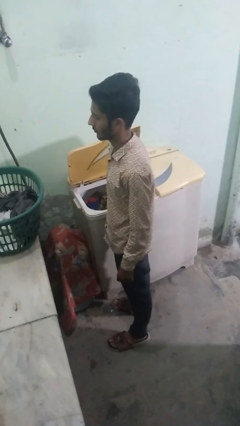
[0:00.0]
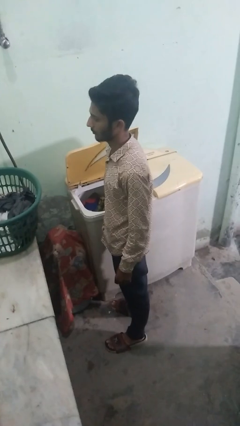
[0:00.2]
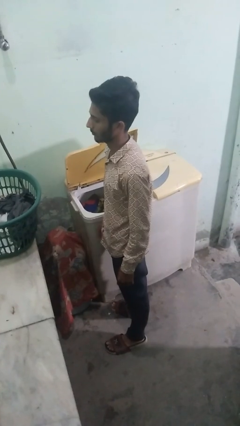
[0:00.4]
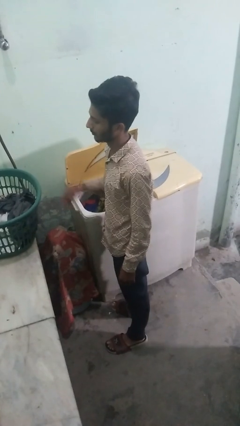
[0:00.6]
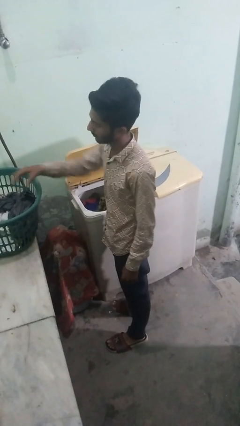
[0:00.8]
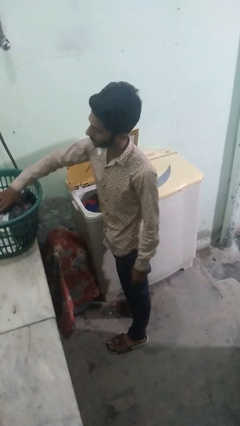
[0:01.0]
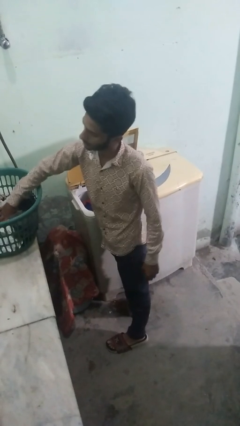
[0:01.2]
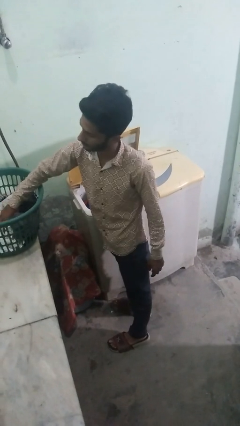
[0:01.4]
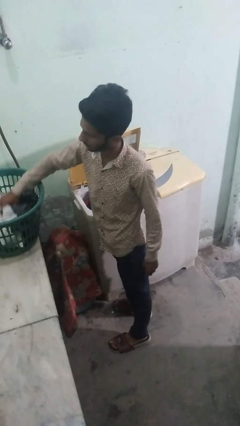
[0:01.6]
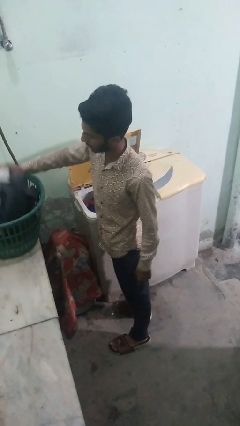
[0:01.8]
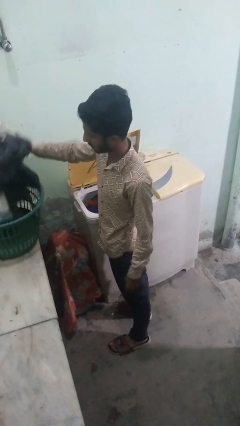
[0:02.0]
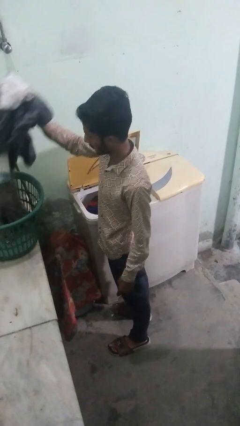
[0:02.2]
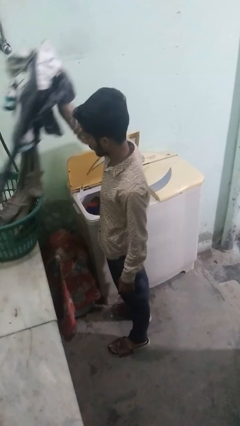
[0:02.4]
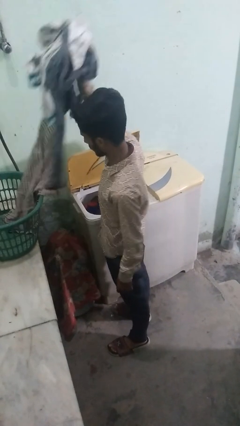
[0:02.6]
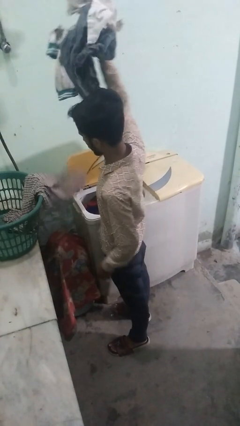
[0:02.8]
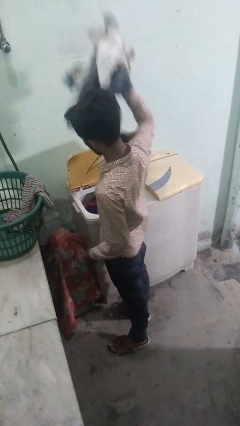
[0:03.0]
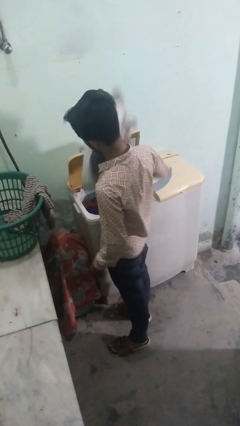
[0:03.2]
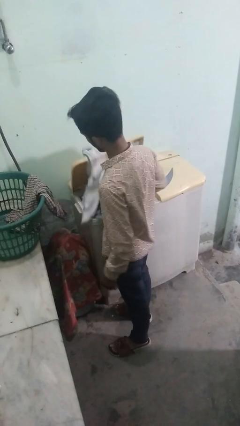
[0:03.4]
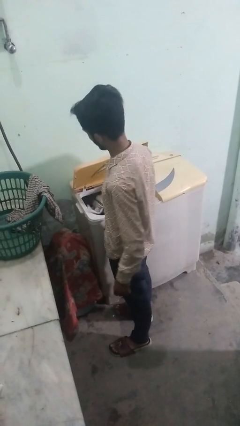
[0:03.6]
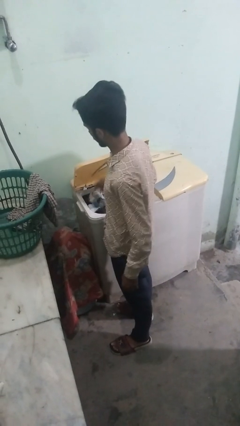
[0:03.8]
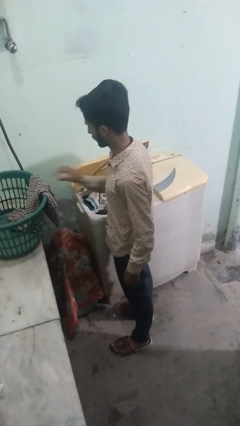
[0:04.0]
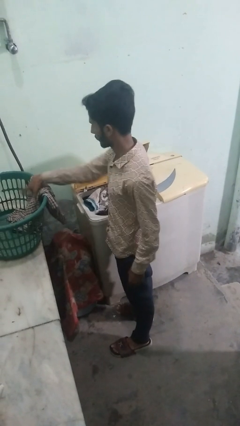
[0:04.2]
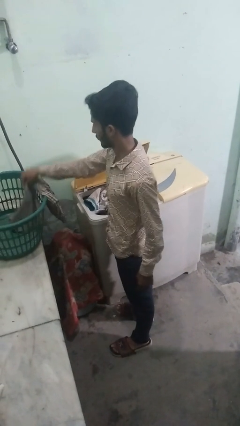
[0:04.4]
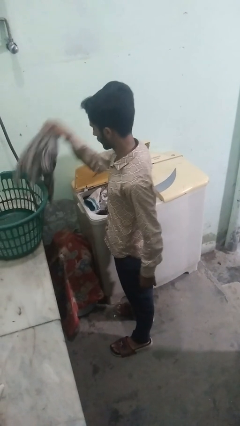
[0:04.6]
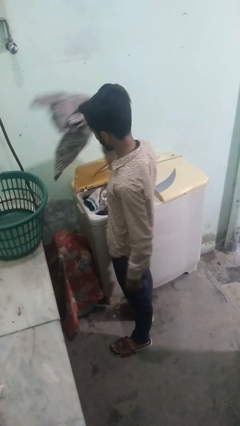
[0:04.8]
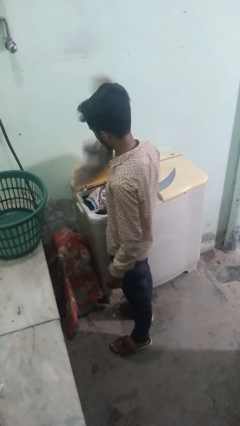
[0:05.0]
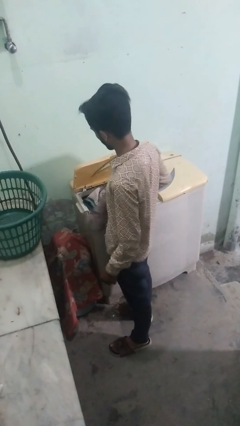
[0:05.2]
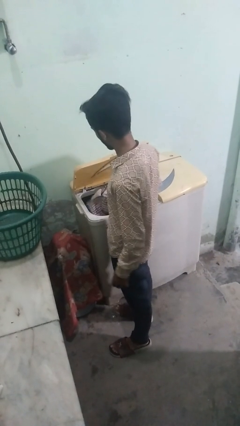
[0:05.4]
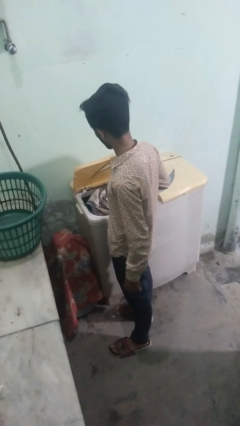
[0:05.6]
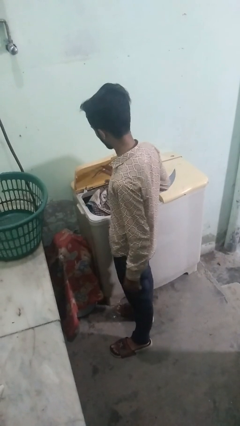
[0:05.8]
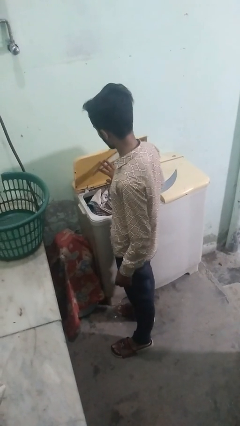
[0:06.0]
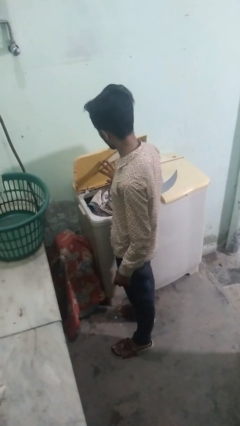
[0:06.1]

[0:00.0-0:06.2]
person loads clotheswasher

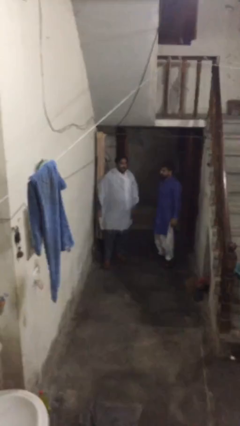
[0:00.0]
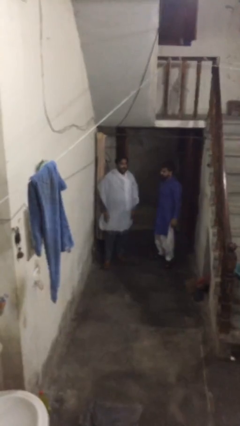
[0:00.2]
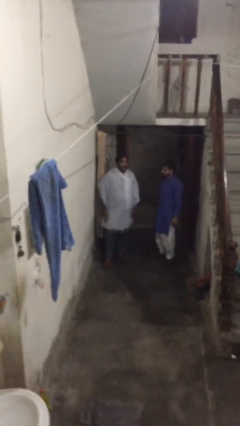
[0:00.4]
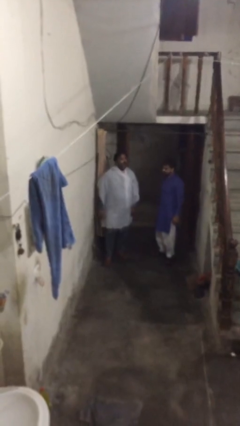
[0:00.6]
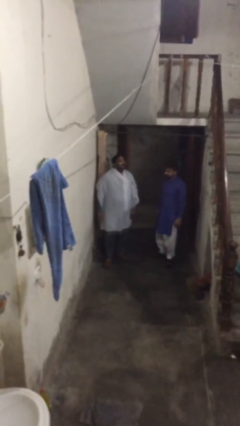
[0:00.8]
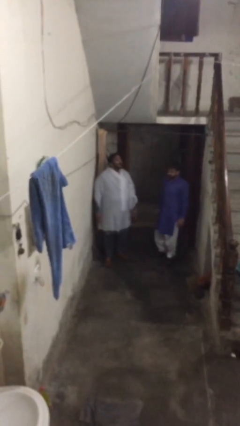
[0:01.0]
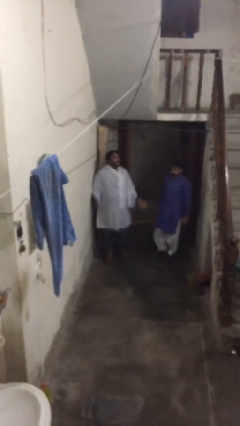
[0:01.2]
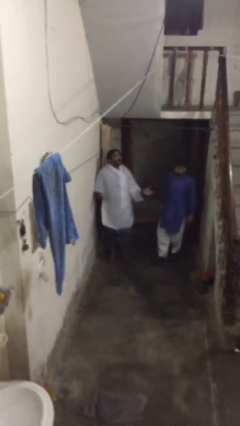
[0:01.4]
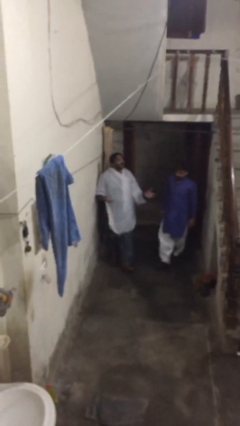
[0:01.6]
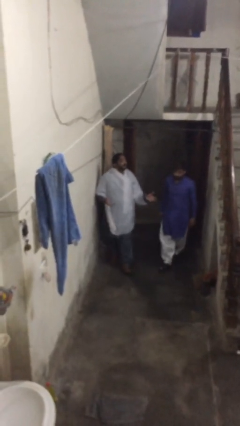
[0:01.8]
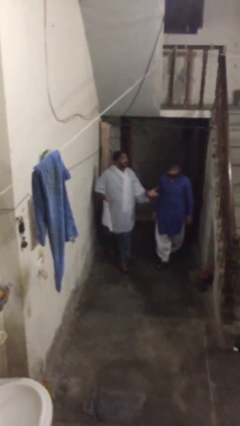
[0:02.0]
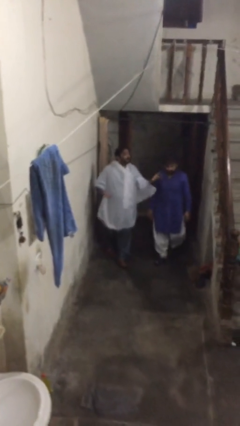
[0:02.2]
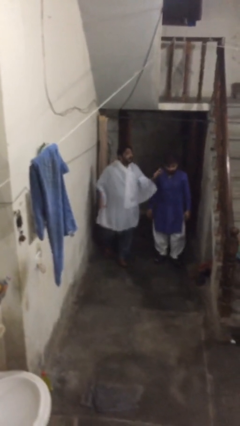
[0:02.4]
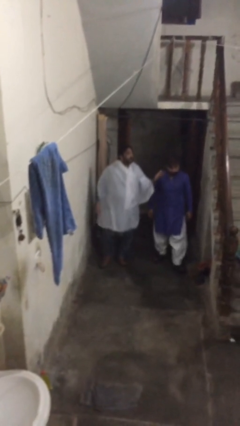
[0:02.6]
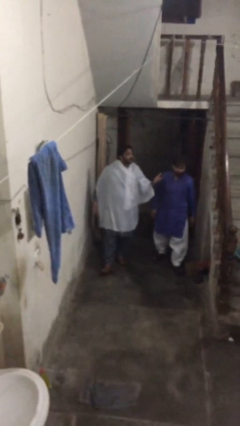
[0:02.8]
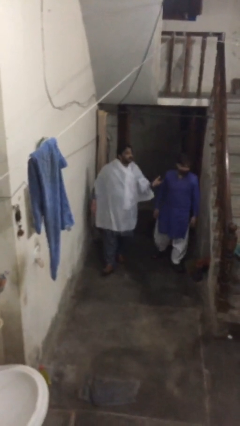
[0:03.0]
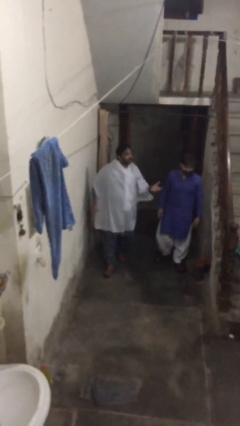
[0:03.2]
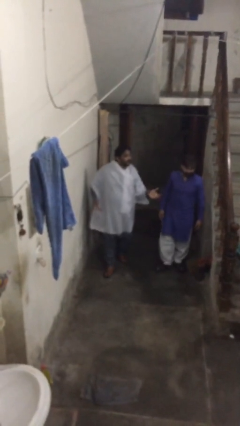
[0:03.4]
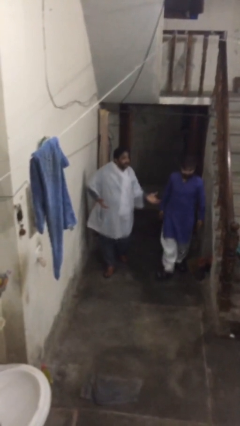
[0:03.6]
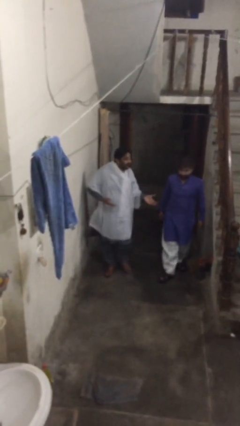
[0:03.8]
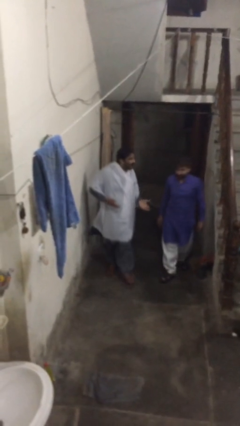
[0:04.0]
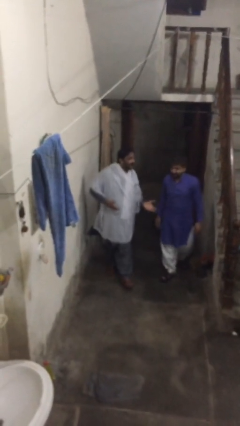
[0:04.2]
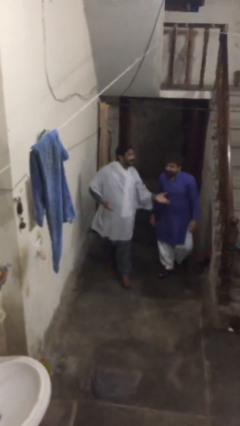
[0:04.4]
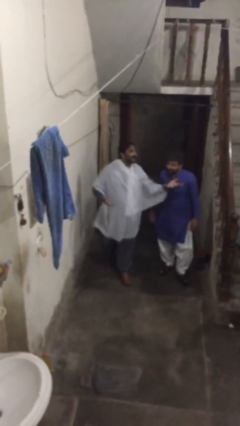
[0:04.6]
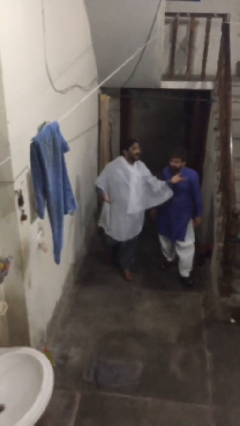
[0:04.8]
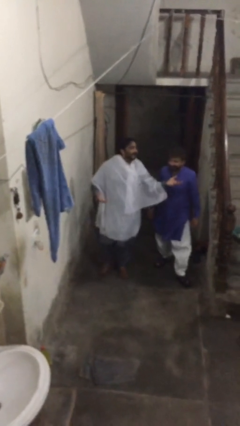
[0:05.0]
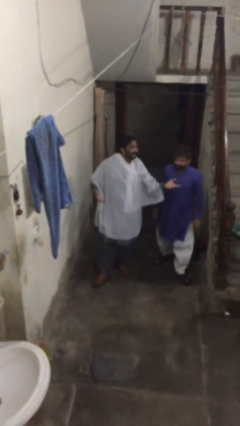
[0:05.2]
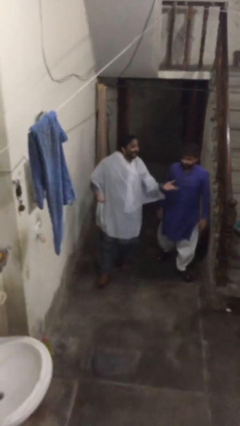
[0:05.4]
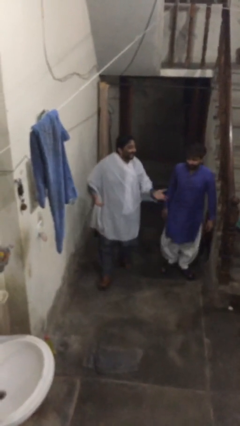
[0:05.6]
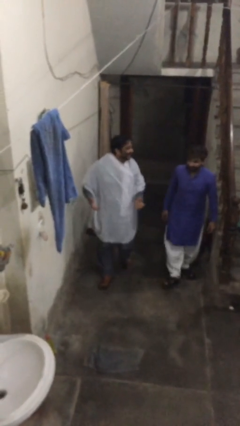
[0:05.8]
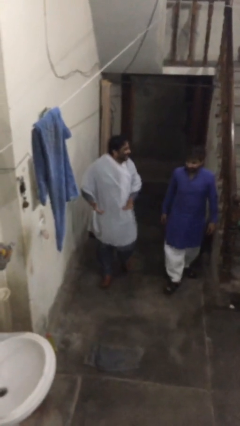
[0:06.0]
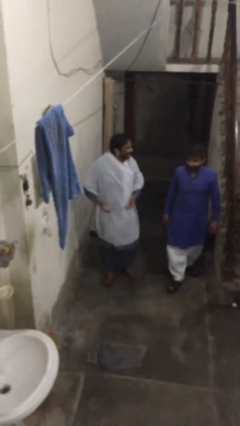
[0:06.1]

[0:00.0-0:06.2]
person talks to person

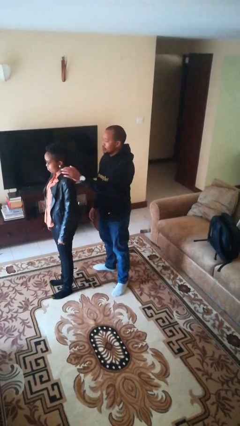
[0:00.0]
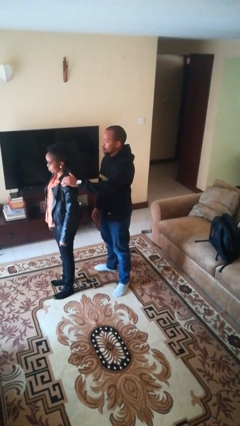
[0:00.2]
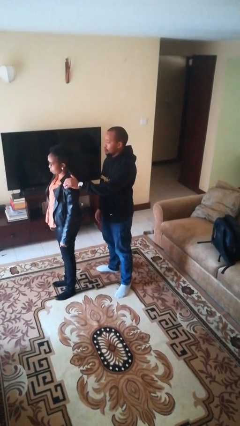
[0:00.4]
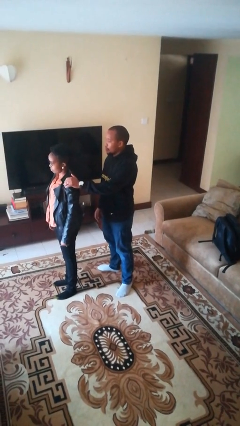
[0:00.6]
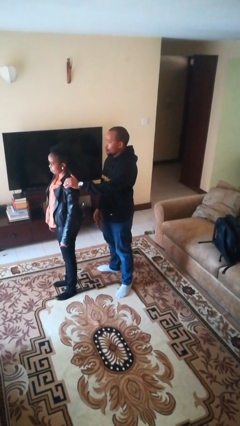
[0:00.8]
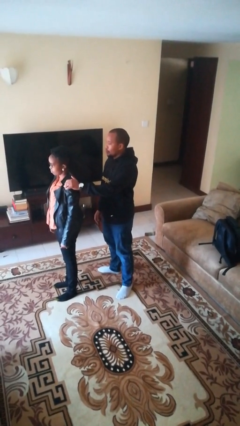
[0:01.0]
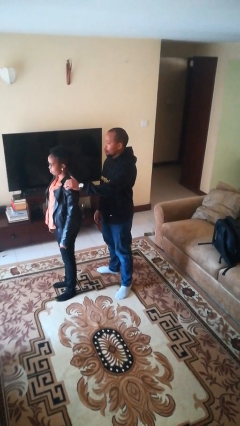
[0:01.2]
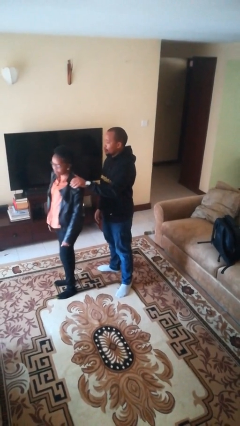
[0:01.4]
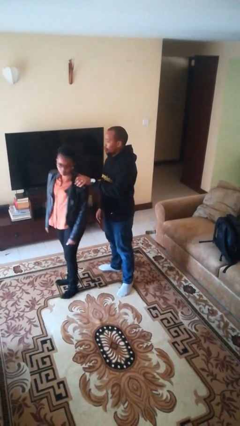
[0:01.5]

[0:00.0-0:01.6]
person grabs person by shoulder

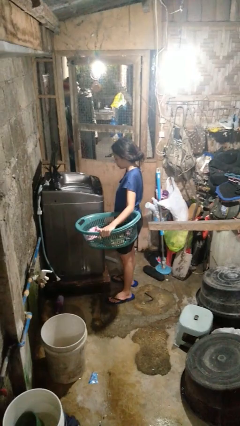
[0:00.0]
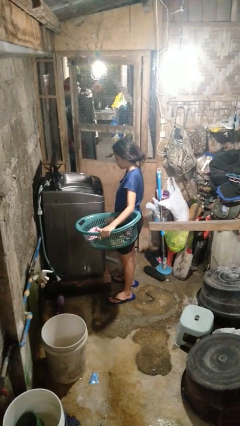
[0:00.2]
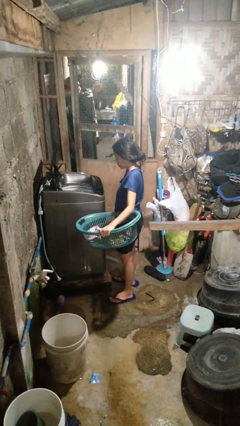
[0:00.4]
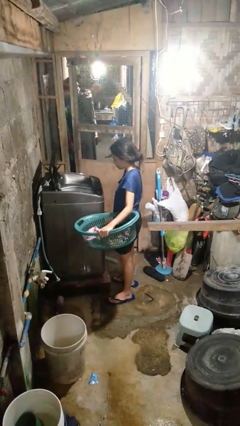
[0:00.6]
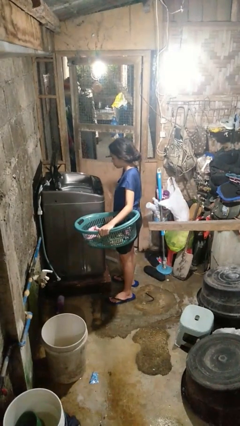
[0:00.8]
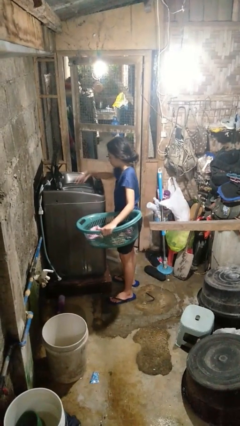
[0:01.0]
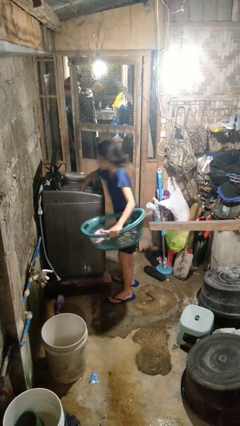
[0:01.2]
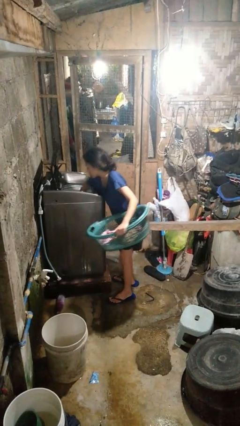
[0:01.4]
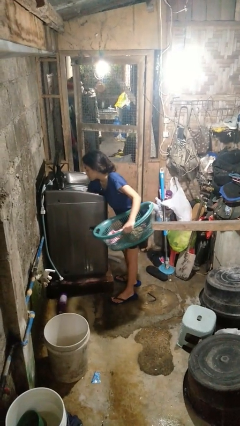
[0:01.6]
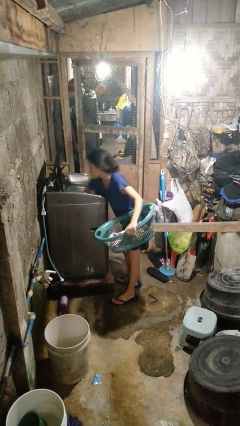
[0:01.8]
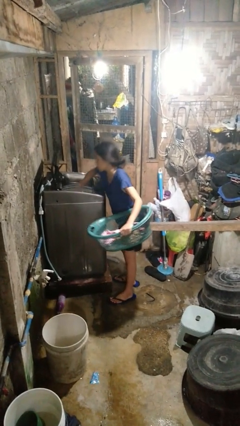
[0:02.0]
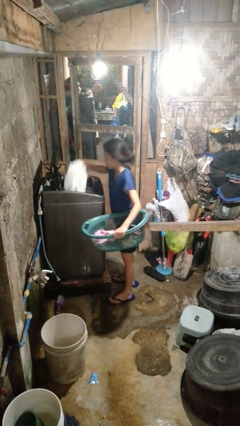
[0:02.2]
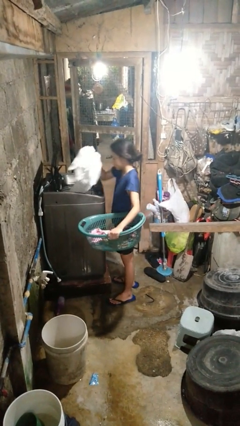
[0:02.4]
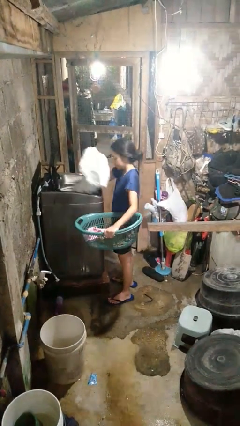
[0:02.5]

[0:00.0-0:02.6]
person unloads clotheswasher

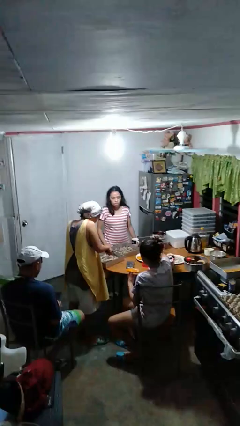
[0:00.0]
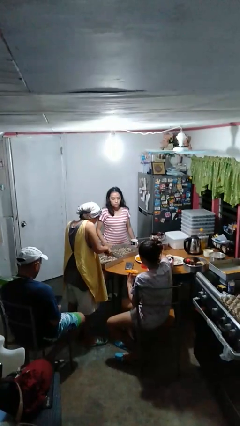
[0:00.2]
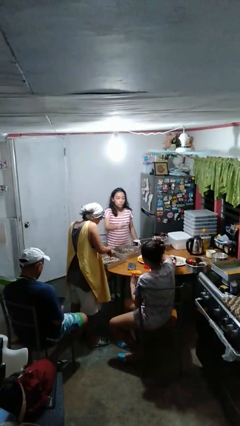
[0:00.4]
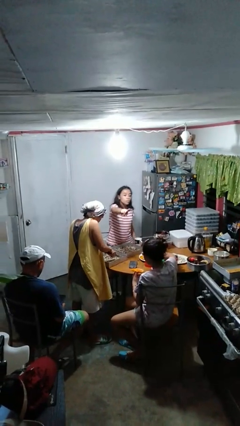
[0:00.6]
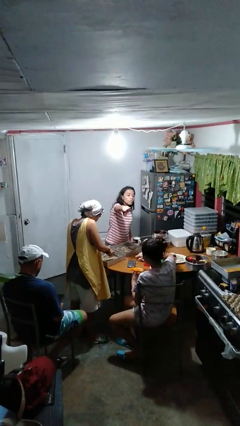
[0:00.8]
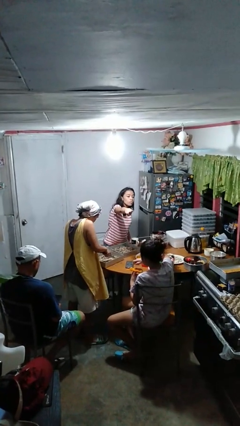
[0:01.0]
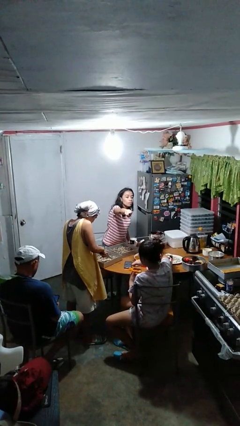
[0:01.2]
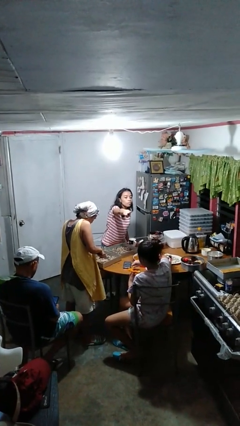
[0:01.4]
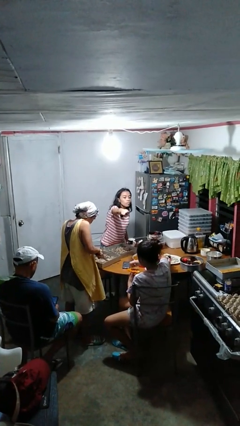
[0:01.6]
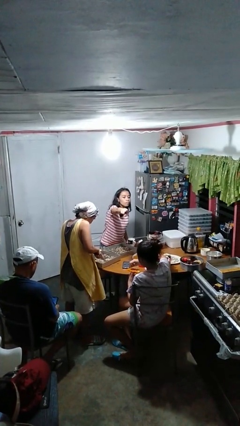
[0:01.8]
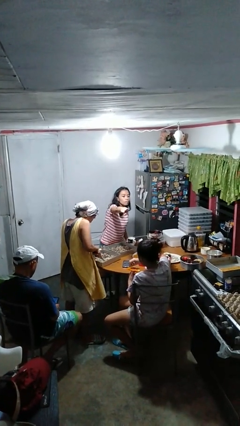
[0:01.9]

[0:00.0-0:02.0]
person points at person
